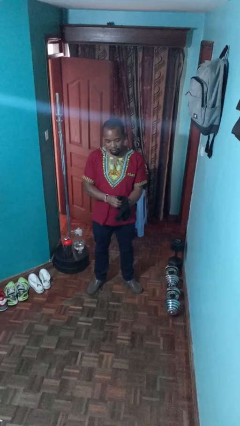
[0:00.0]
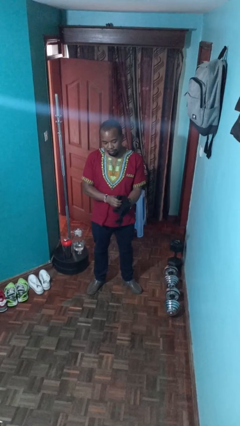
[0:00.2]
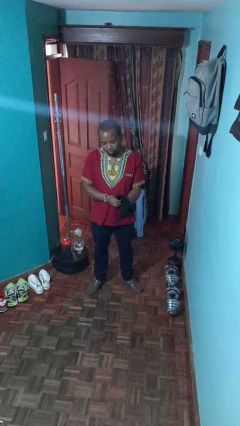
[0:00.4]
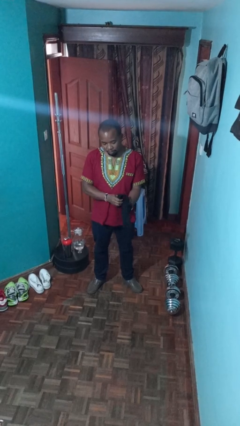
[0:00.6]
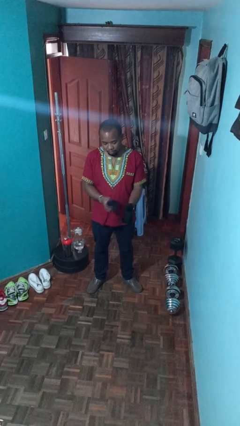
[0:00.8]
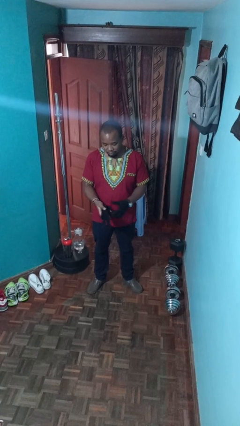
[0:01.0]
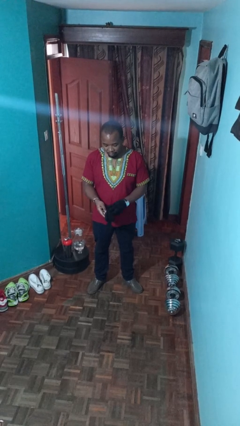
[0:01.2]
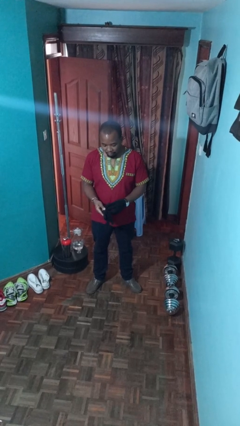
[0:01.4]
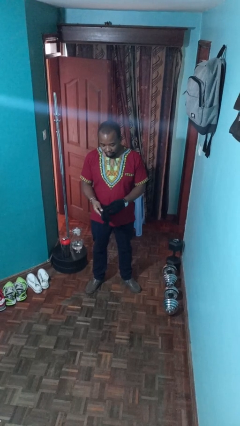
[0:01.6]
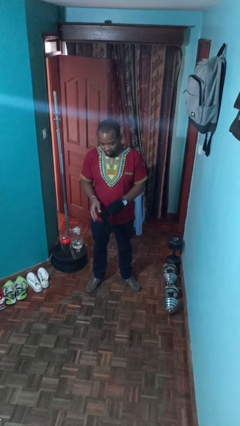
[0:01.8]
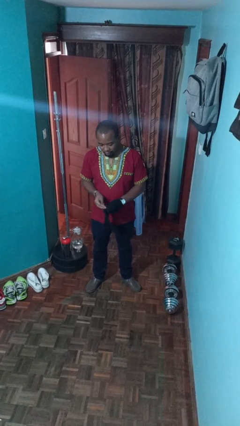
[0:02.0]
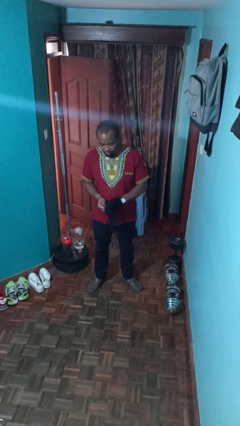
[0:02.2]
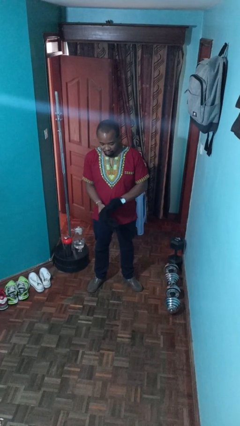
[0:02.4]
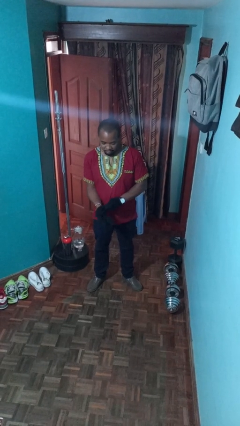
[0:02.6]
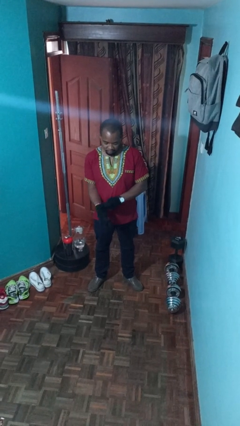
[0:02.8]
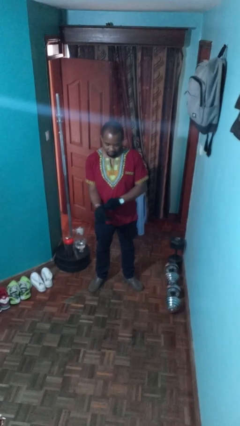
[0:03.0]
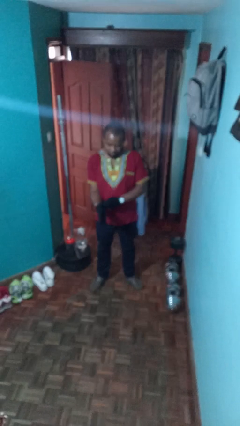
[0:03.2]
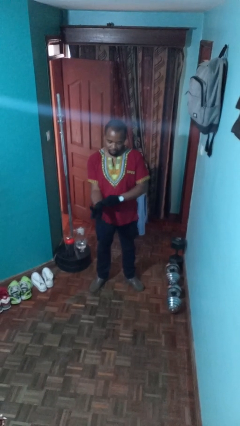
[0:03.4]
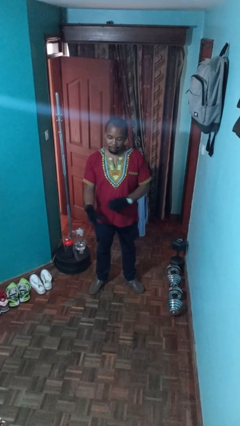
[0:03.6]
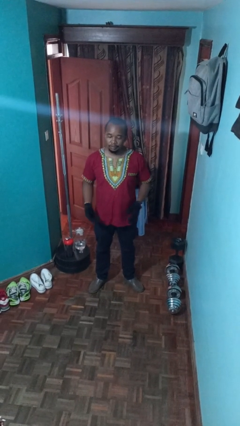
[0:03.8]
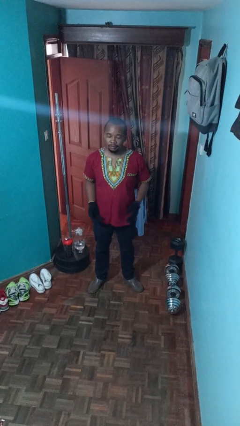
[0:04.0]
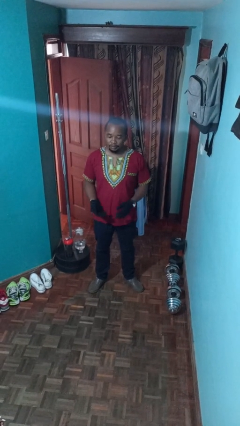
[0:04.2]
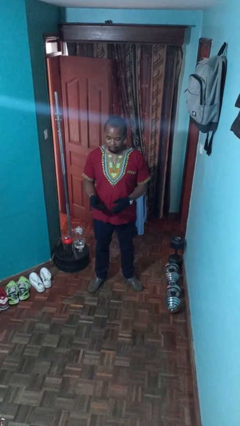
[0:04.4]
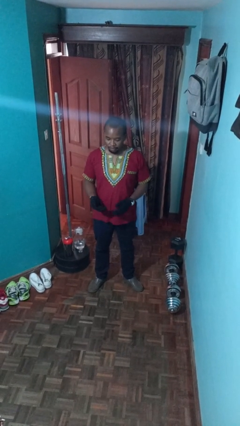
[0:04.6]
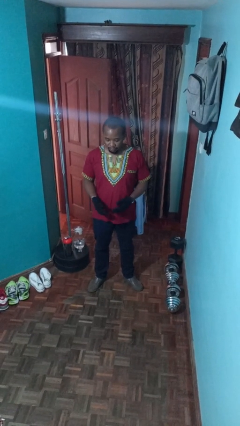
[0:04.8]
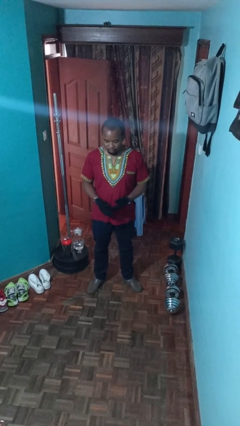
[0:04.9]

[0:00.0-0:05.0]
person puts on gloves

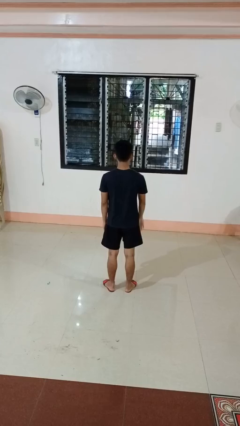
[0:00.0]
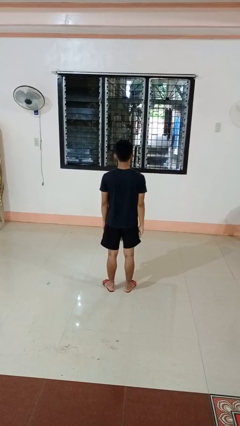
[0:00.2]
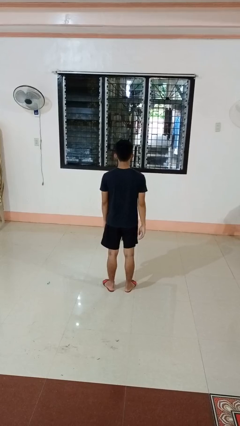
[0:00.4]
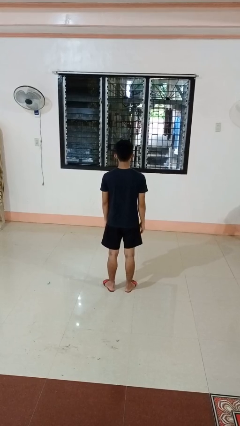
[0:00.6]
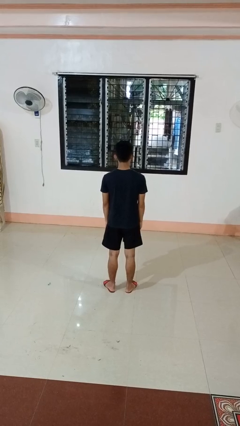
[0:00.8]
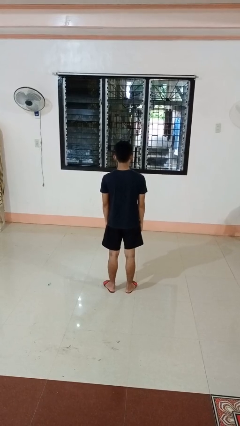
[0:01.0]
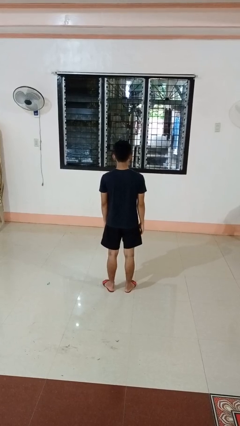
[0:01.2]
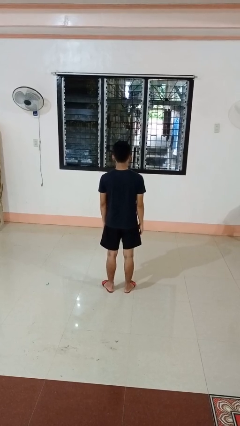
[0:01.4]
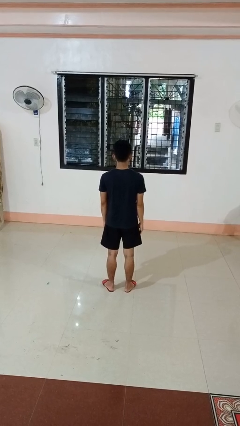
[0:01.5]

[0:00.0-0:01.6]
person gestures swipe down

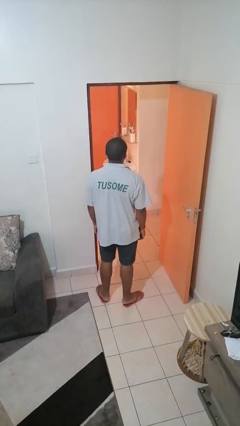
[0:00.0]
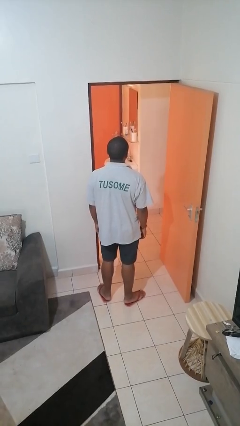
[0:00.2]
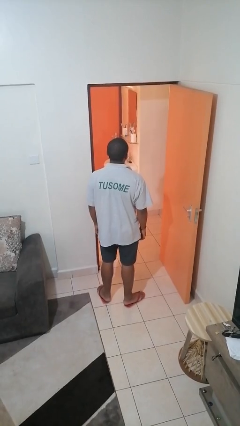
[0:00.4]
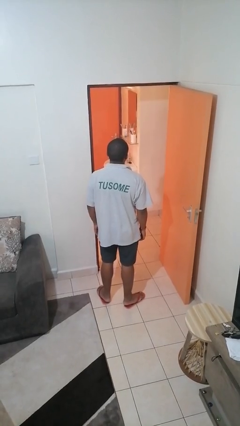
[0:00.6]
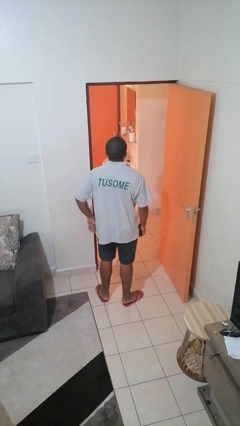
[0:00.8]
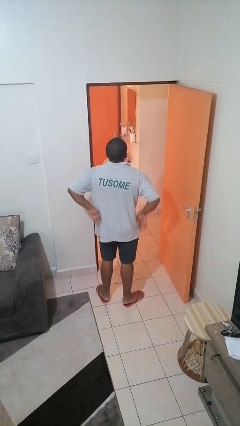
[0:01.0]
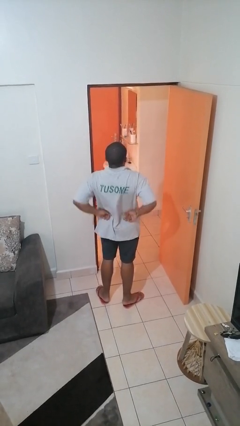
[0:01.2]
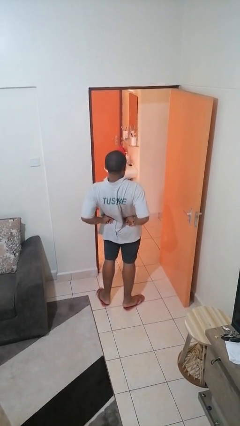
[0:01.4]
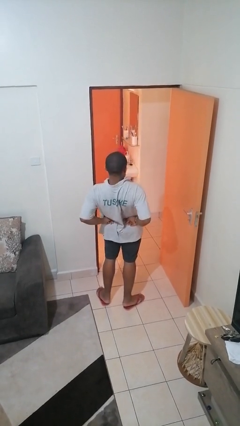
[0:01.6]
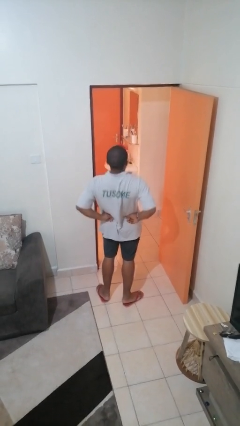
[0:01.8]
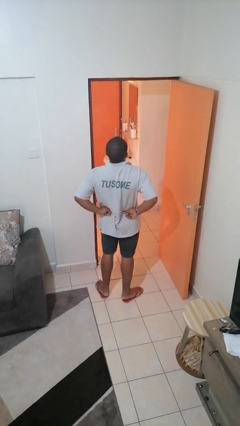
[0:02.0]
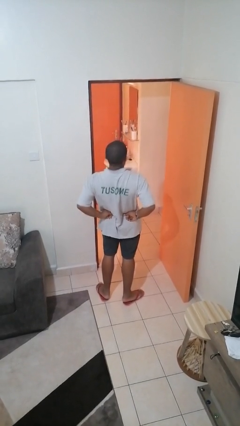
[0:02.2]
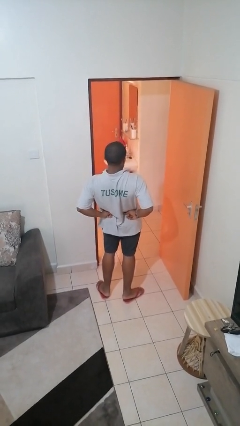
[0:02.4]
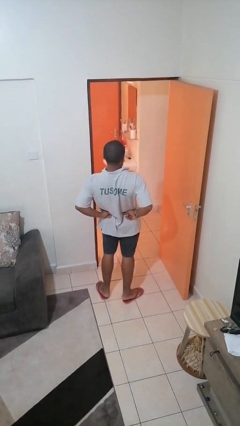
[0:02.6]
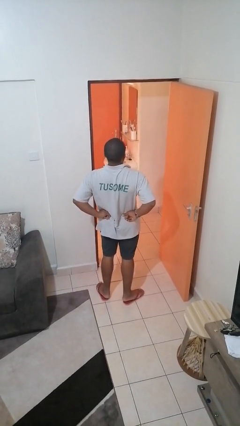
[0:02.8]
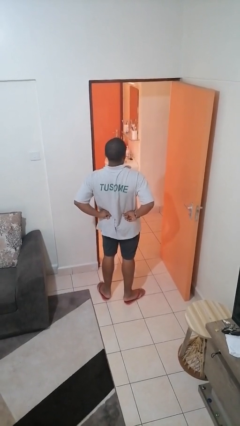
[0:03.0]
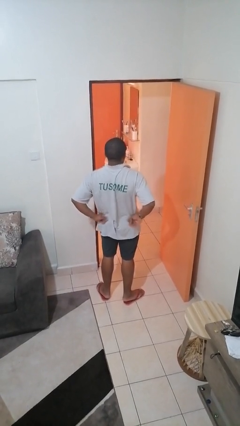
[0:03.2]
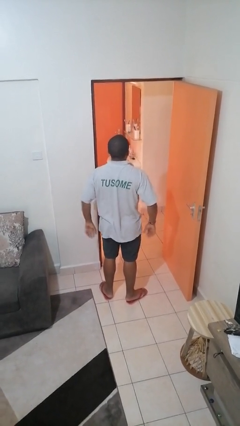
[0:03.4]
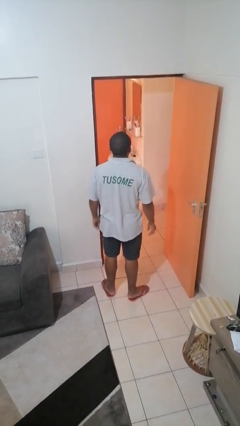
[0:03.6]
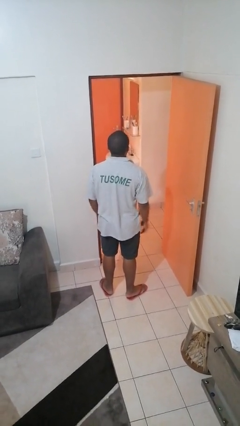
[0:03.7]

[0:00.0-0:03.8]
person stretches back

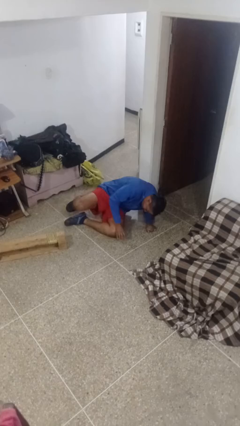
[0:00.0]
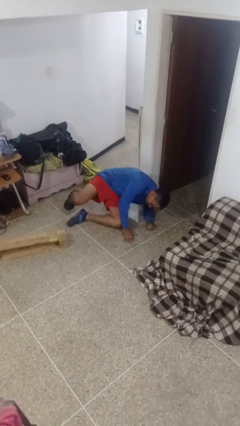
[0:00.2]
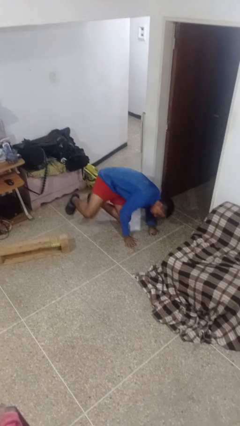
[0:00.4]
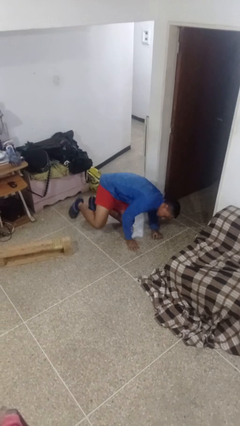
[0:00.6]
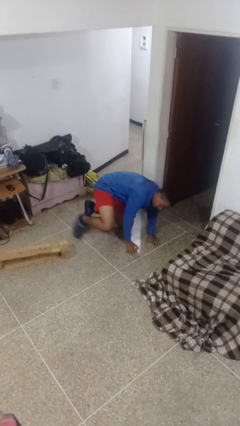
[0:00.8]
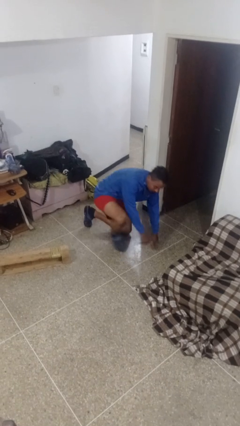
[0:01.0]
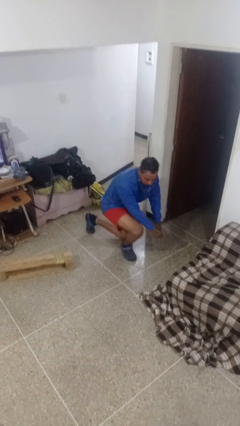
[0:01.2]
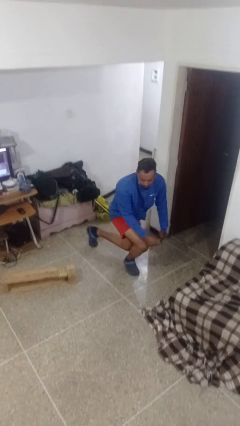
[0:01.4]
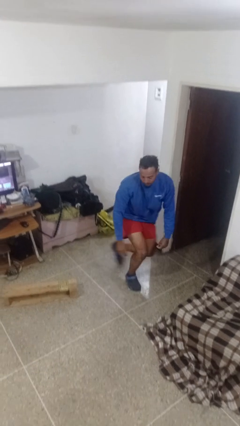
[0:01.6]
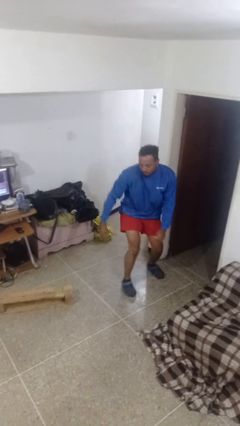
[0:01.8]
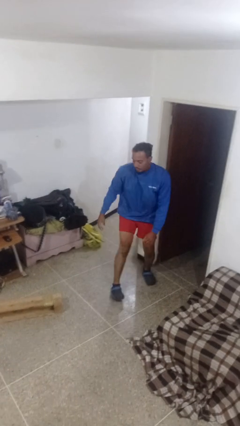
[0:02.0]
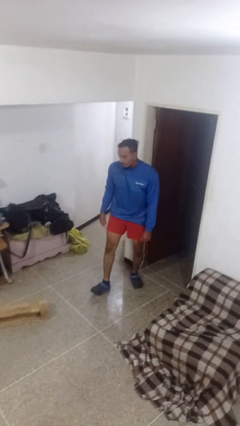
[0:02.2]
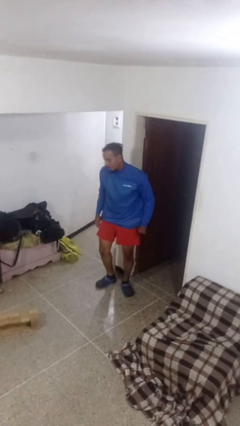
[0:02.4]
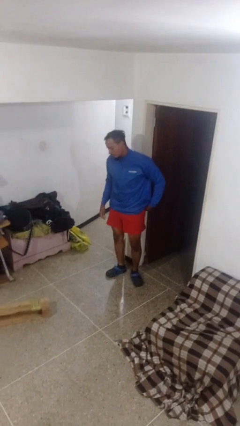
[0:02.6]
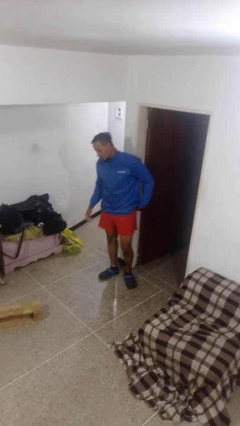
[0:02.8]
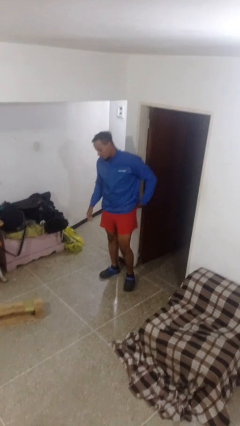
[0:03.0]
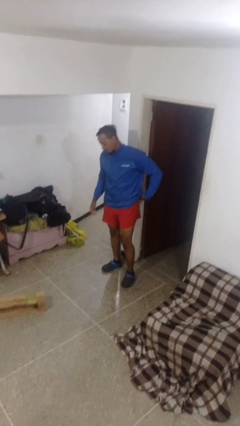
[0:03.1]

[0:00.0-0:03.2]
person stands up from floor

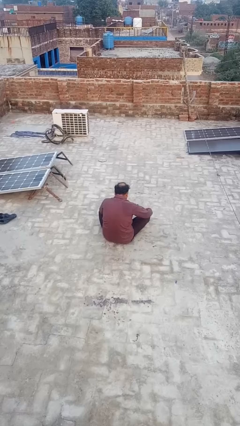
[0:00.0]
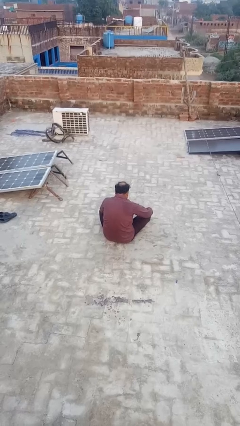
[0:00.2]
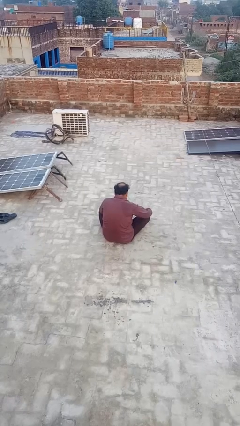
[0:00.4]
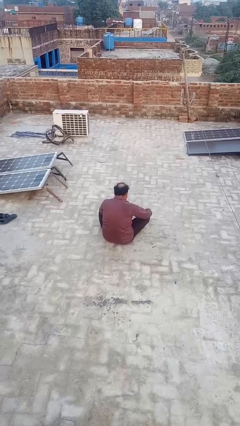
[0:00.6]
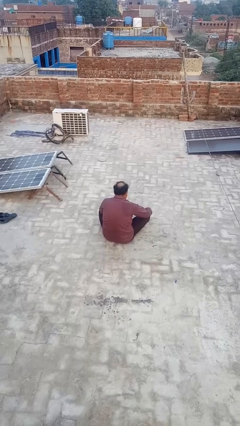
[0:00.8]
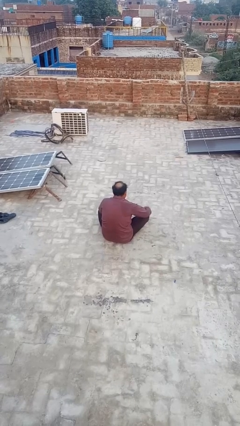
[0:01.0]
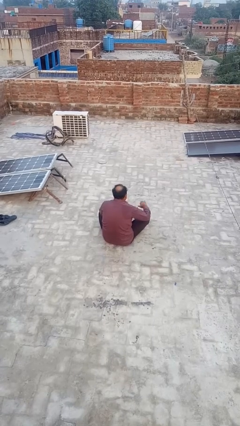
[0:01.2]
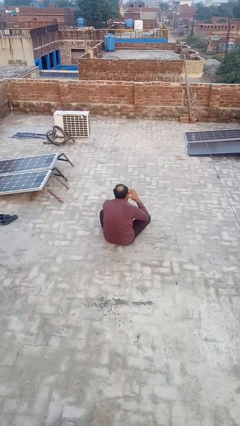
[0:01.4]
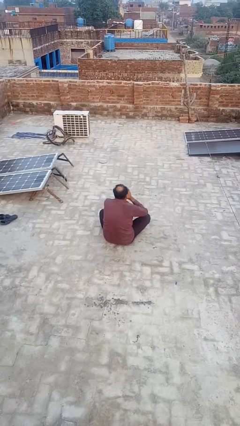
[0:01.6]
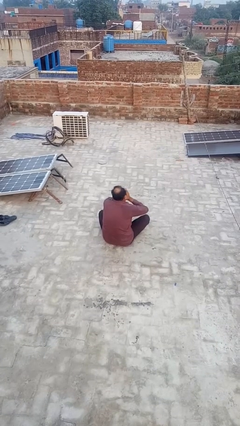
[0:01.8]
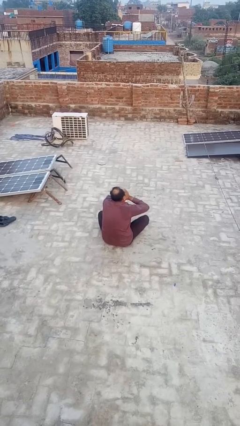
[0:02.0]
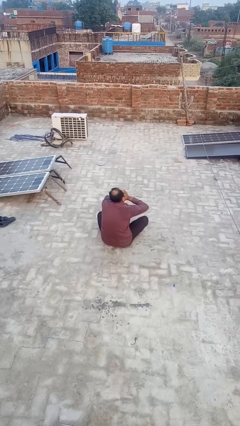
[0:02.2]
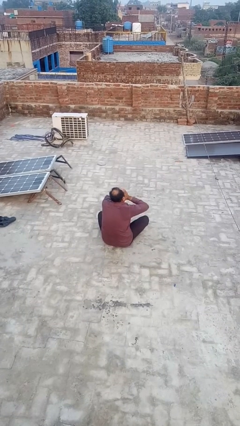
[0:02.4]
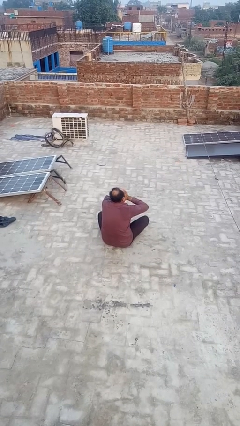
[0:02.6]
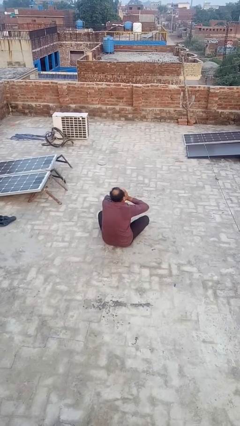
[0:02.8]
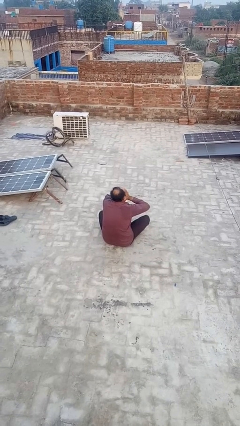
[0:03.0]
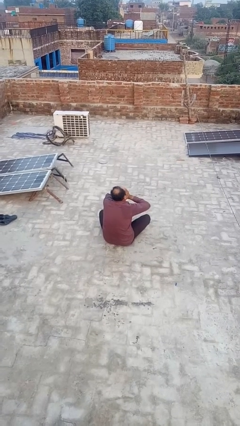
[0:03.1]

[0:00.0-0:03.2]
person yawns

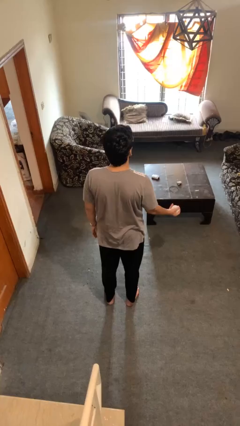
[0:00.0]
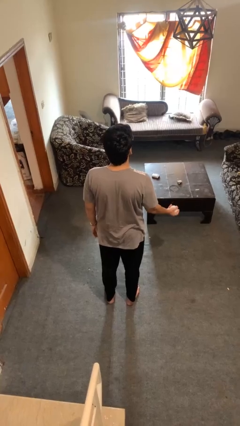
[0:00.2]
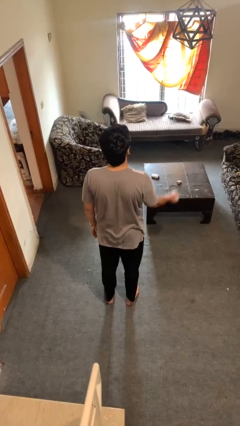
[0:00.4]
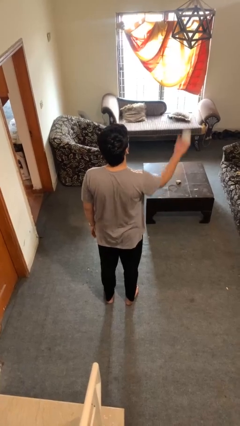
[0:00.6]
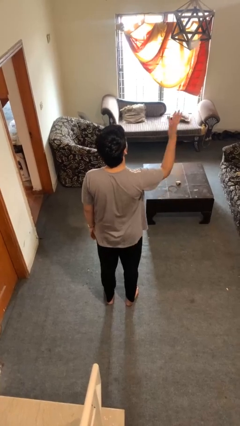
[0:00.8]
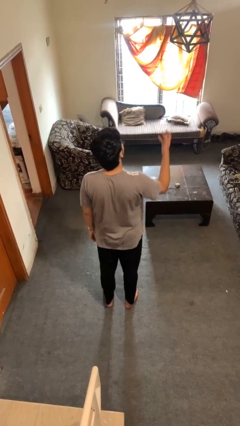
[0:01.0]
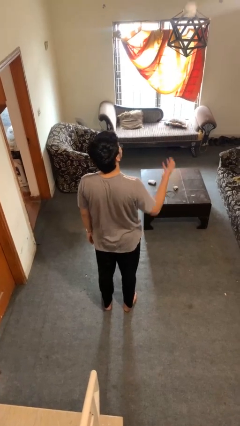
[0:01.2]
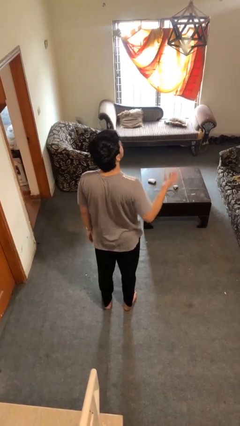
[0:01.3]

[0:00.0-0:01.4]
person drops object
